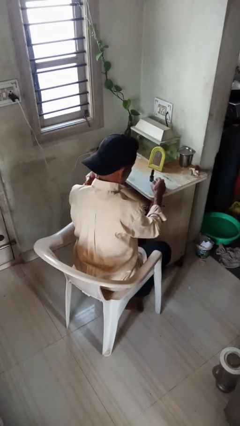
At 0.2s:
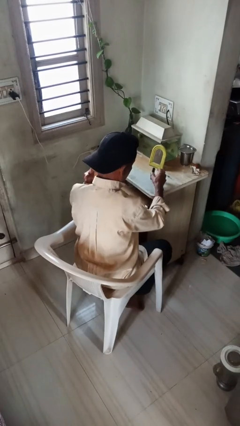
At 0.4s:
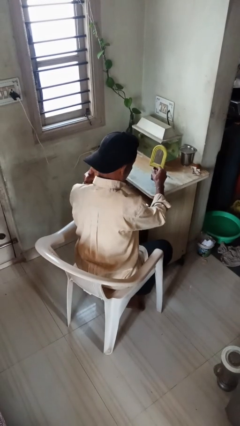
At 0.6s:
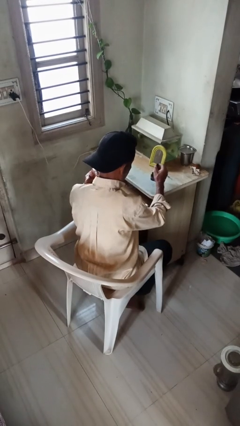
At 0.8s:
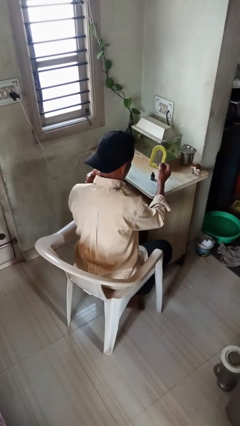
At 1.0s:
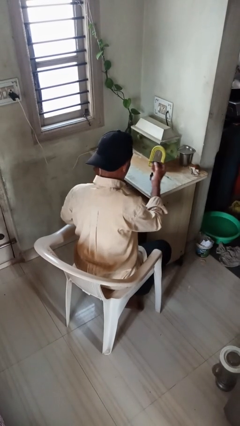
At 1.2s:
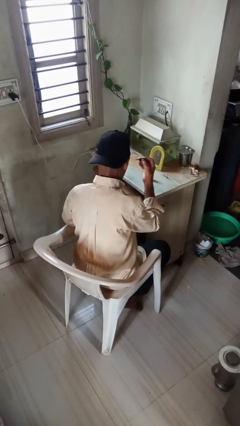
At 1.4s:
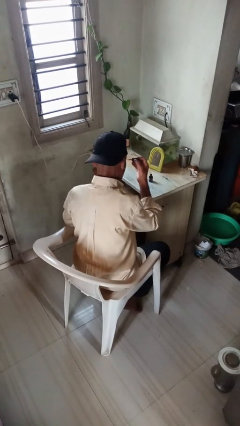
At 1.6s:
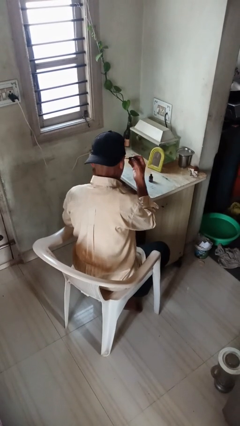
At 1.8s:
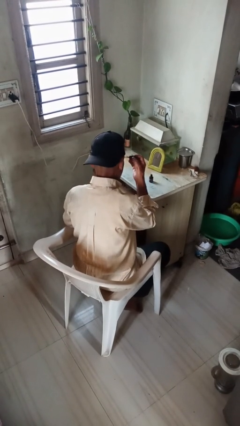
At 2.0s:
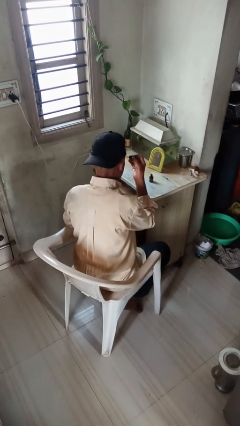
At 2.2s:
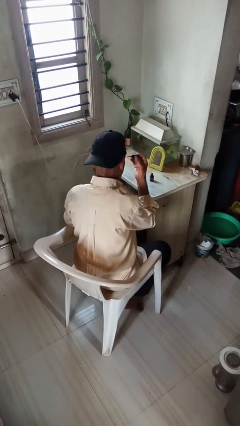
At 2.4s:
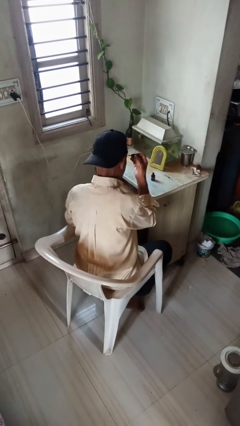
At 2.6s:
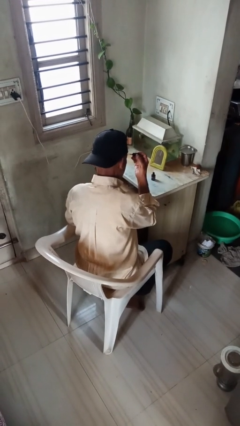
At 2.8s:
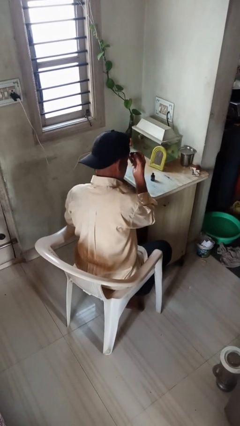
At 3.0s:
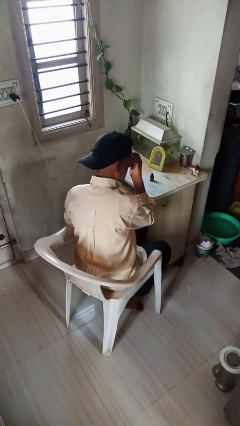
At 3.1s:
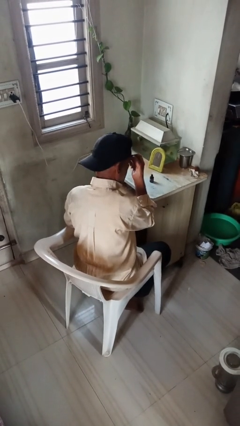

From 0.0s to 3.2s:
person applies eye makeup

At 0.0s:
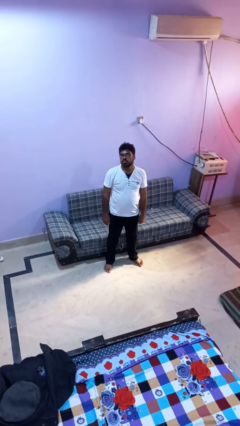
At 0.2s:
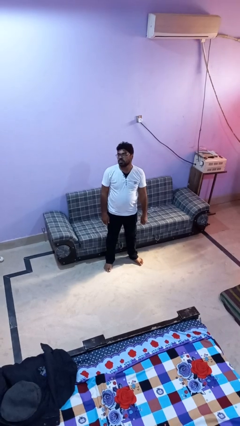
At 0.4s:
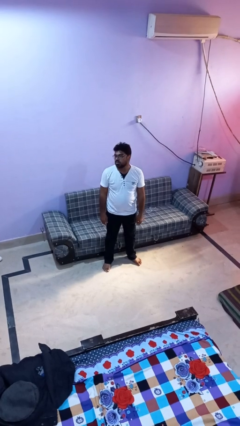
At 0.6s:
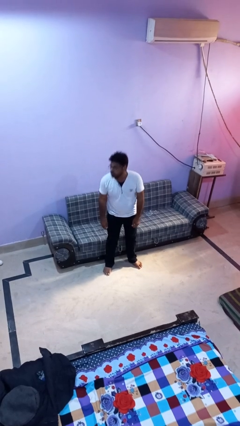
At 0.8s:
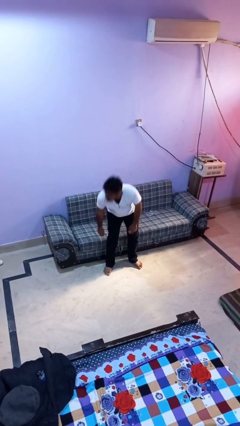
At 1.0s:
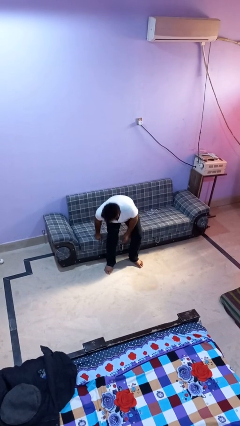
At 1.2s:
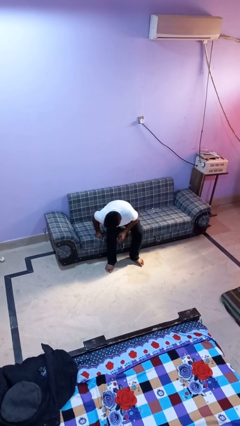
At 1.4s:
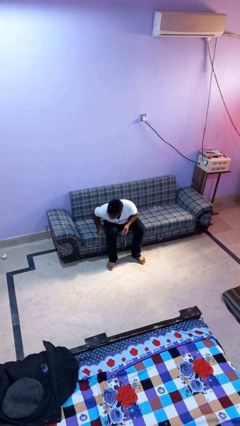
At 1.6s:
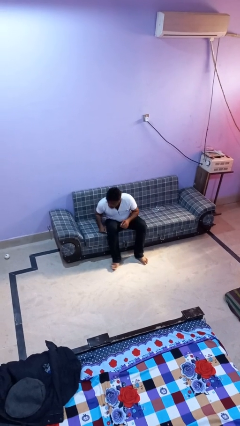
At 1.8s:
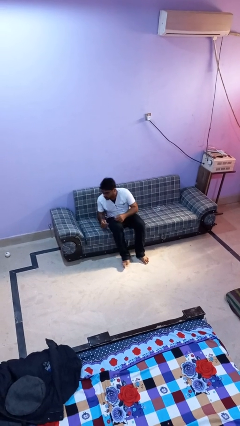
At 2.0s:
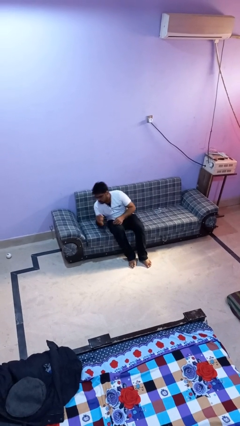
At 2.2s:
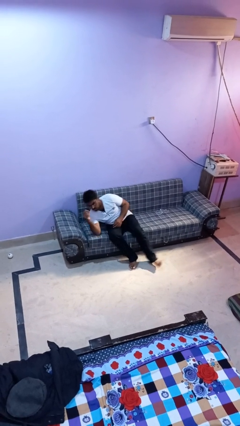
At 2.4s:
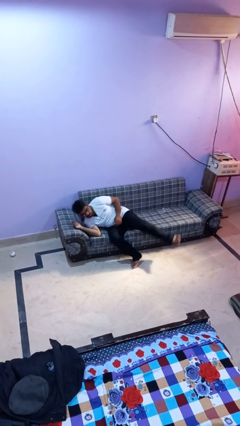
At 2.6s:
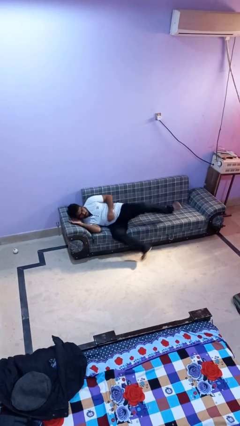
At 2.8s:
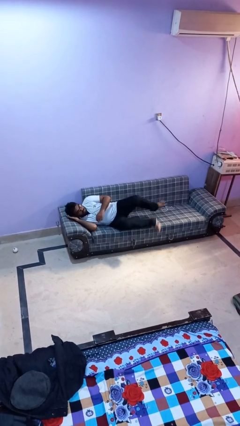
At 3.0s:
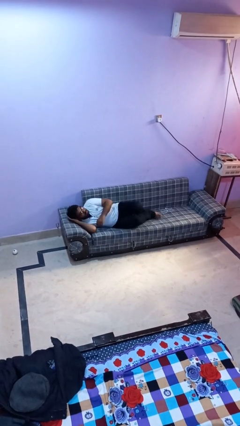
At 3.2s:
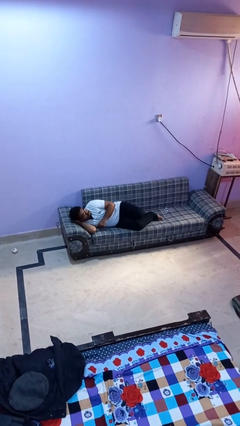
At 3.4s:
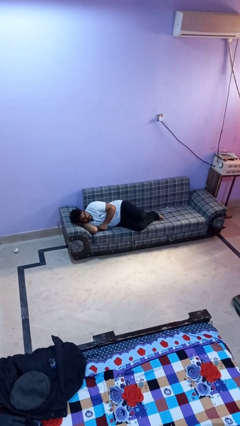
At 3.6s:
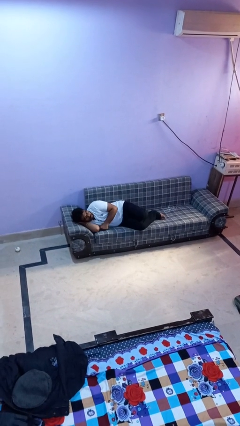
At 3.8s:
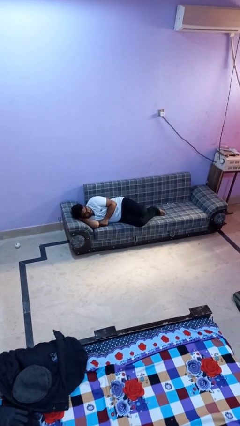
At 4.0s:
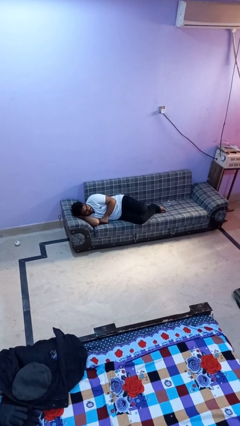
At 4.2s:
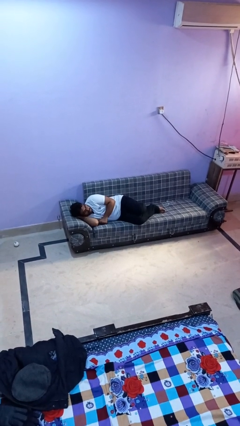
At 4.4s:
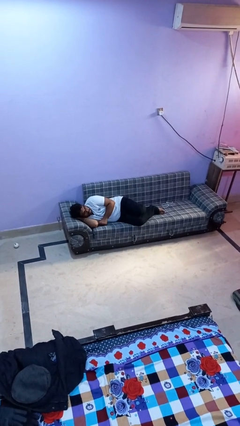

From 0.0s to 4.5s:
person lies down on couch

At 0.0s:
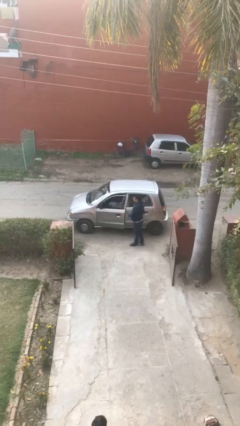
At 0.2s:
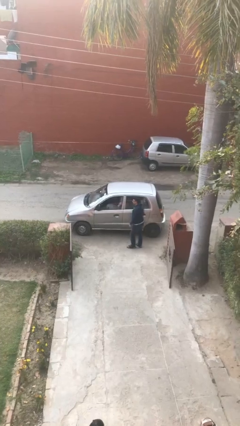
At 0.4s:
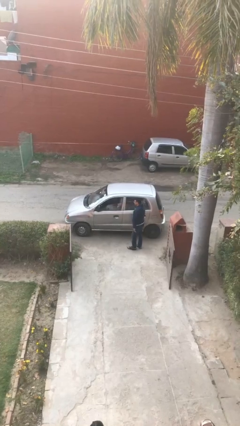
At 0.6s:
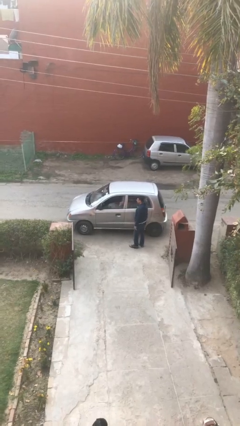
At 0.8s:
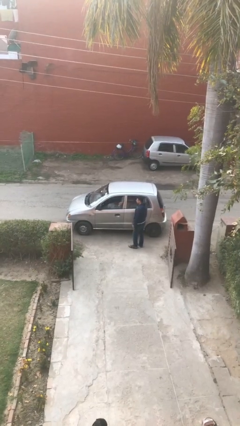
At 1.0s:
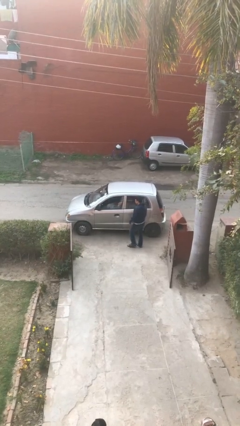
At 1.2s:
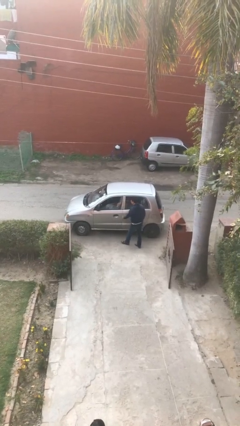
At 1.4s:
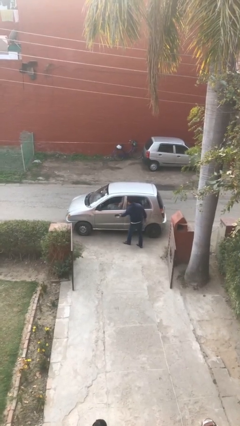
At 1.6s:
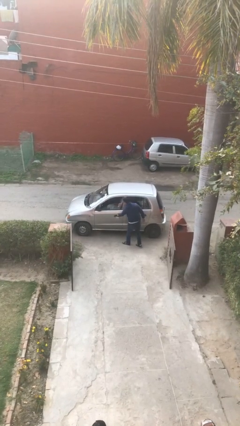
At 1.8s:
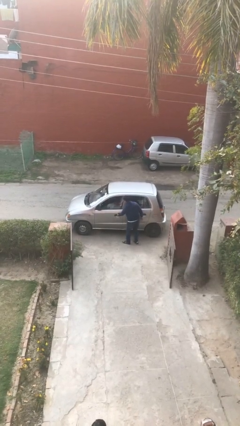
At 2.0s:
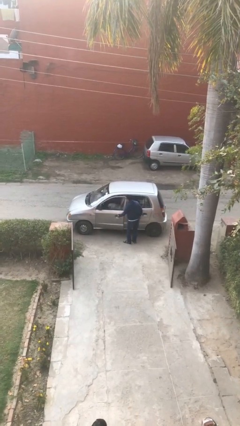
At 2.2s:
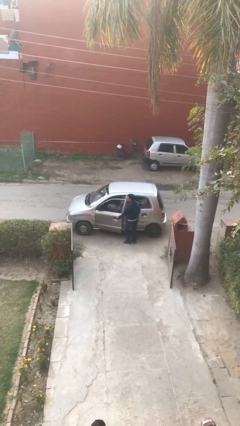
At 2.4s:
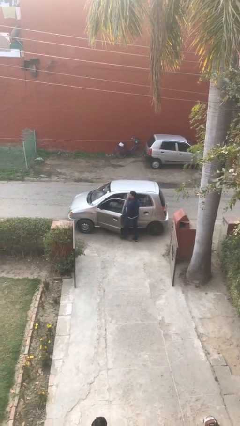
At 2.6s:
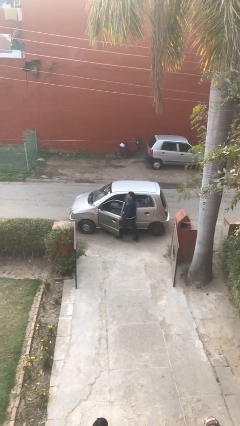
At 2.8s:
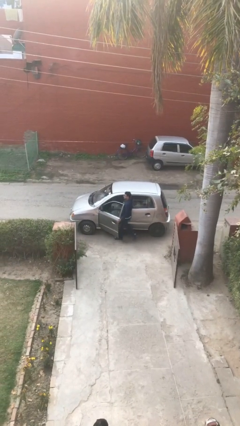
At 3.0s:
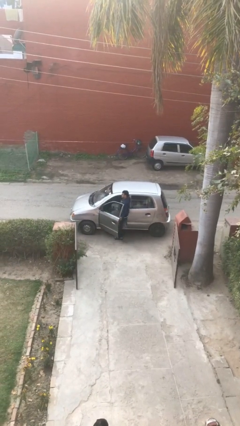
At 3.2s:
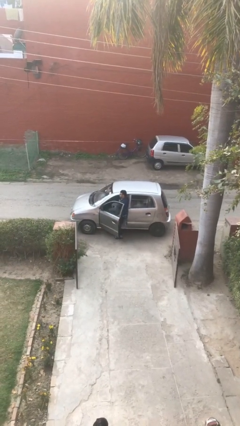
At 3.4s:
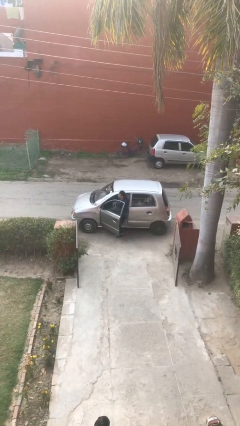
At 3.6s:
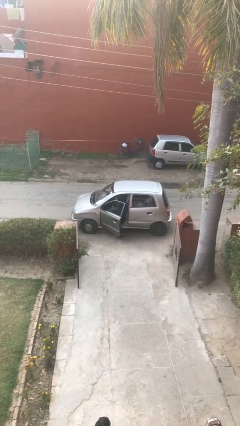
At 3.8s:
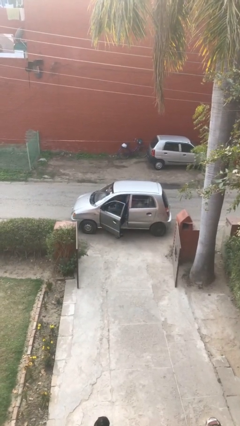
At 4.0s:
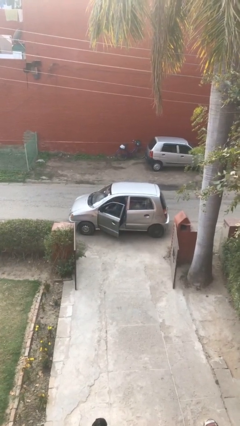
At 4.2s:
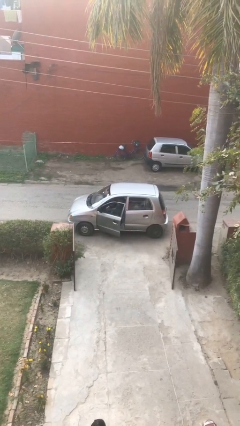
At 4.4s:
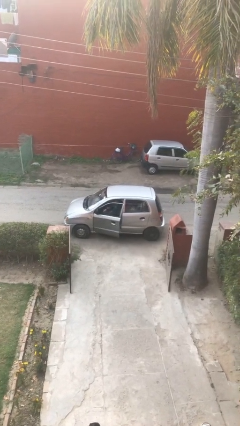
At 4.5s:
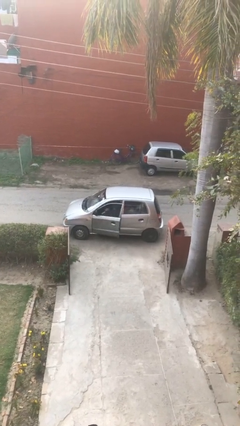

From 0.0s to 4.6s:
car picks up person

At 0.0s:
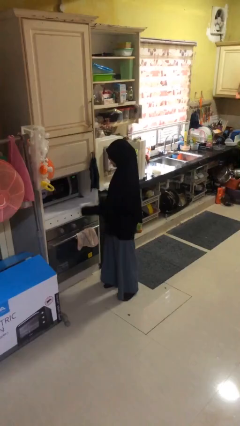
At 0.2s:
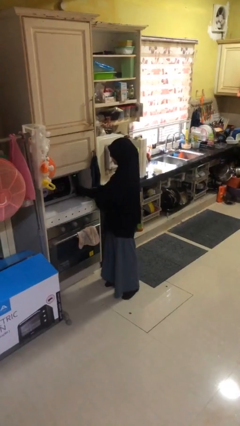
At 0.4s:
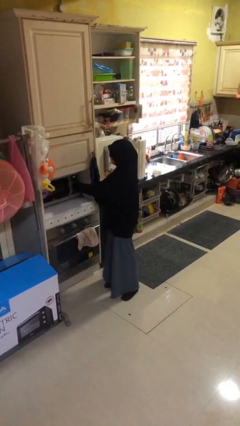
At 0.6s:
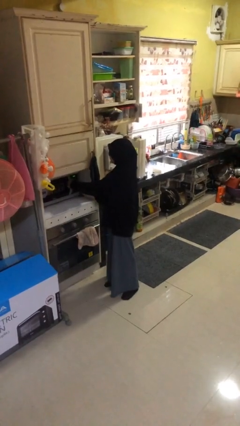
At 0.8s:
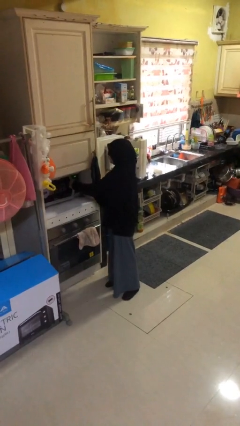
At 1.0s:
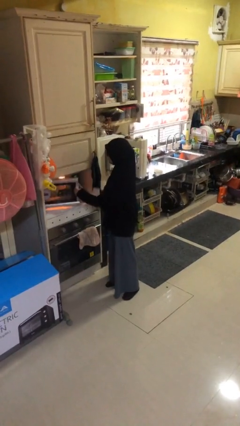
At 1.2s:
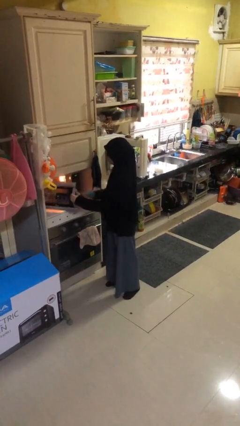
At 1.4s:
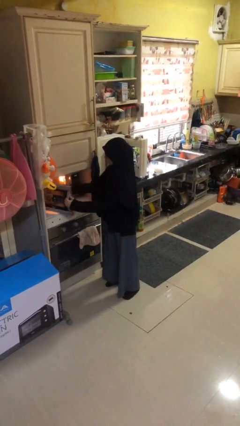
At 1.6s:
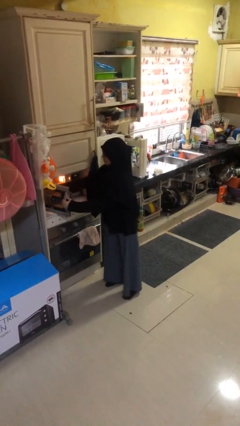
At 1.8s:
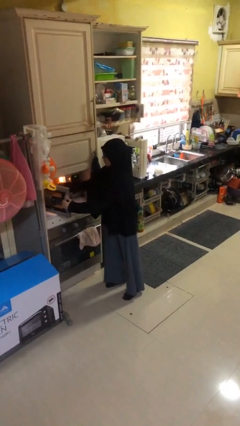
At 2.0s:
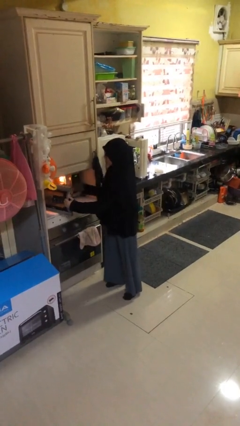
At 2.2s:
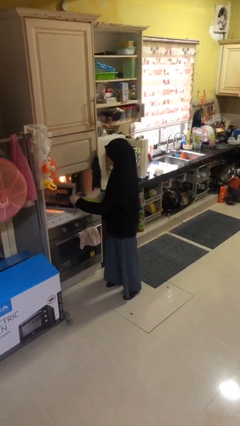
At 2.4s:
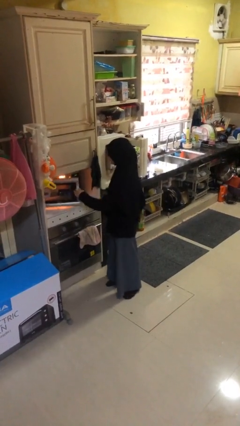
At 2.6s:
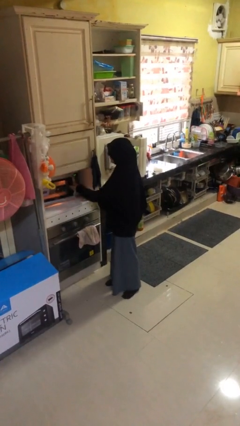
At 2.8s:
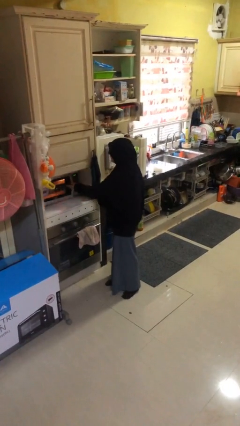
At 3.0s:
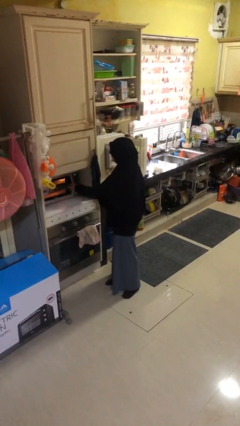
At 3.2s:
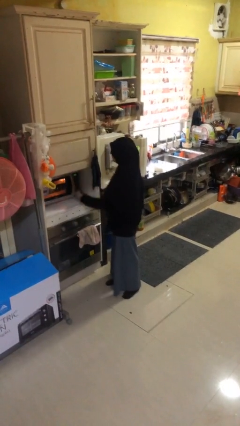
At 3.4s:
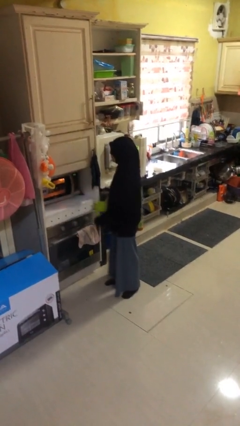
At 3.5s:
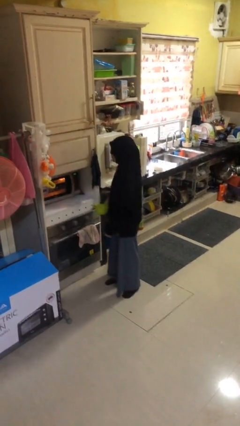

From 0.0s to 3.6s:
person takes object from microwave

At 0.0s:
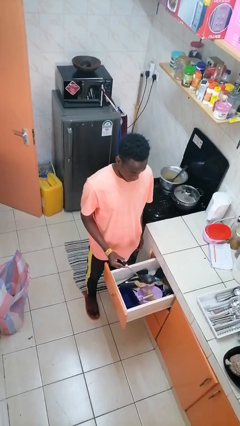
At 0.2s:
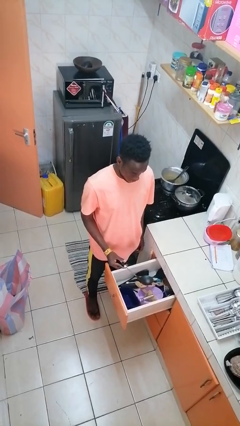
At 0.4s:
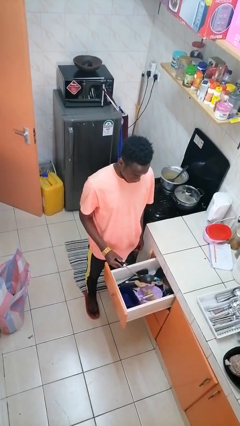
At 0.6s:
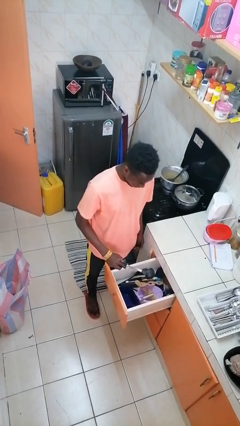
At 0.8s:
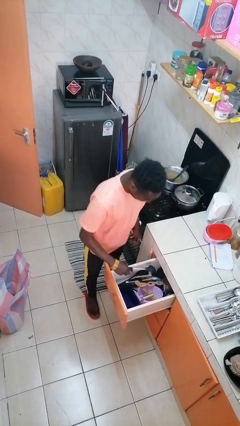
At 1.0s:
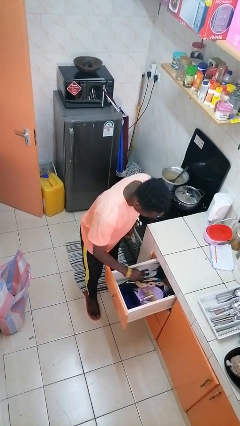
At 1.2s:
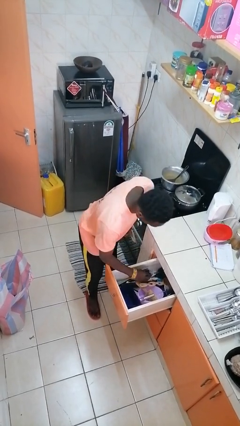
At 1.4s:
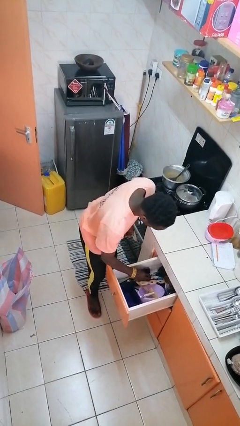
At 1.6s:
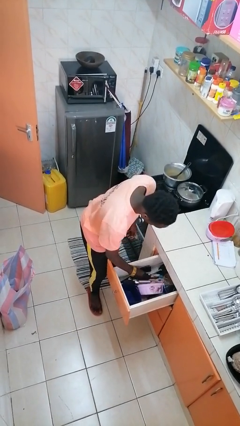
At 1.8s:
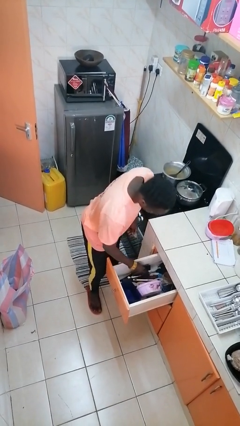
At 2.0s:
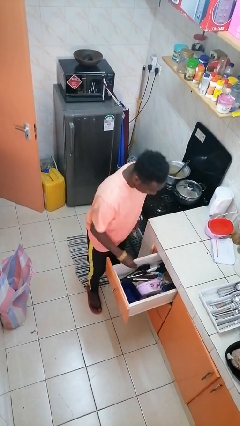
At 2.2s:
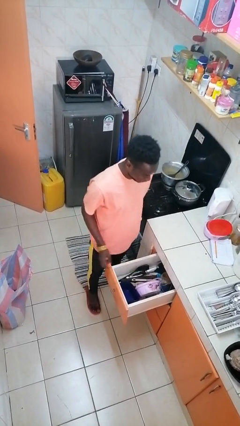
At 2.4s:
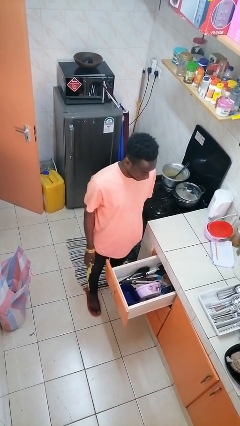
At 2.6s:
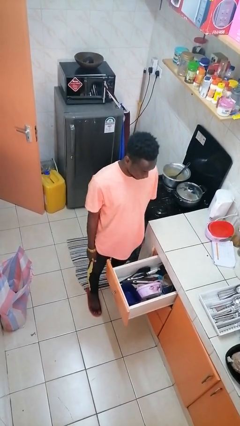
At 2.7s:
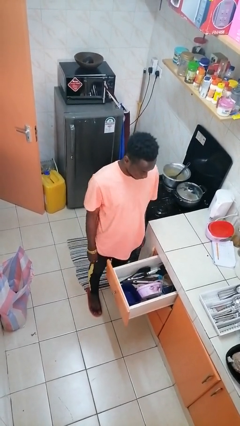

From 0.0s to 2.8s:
person puts object into kitchen drawer
